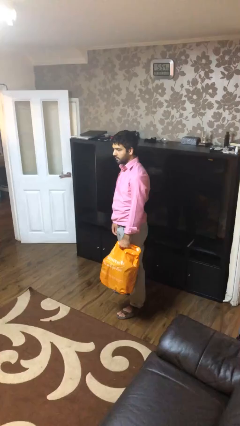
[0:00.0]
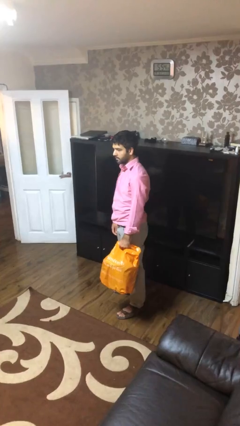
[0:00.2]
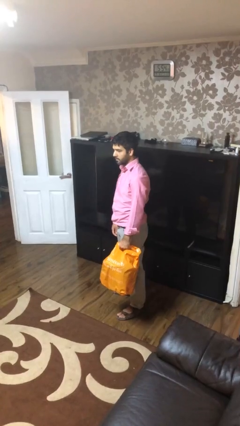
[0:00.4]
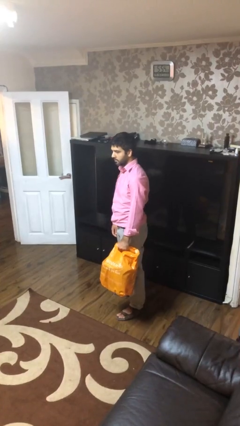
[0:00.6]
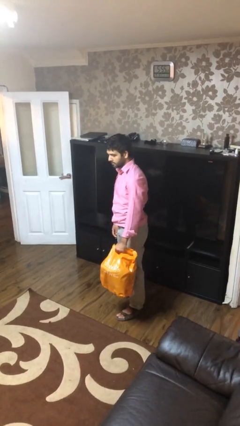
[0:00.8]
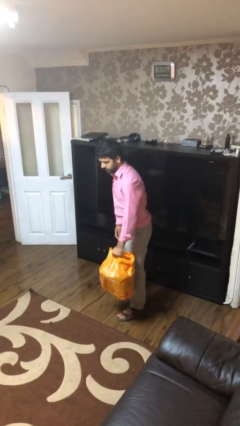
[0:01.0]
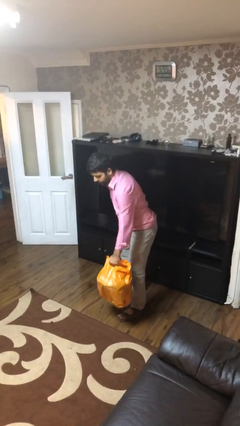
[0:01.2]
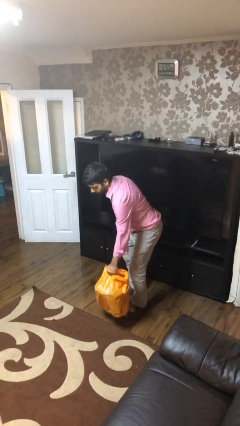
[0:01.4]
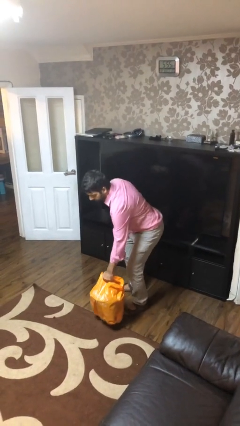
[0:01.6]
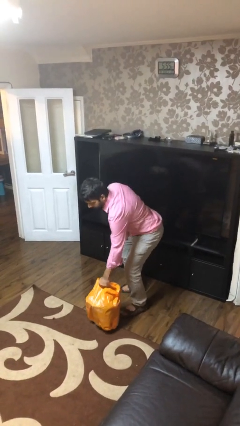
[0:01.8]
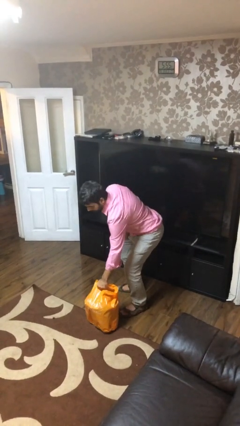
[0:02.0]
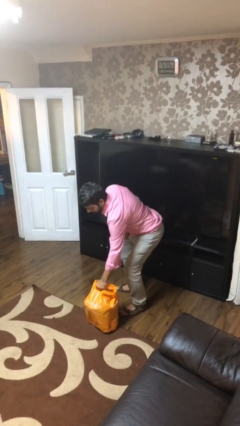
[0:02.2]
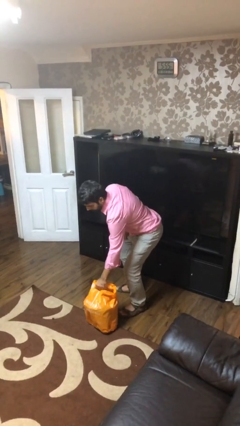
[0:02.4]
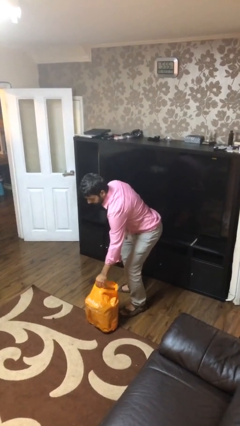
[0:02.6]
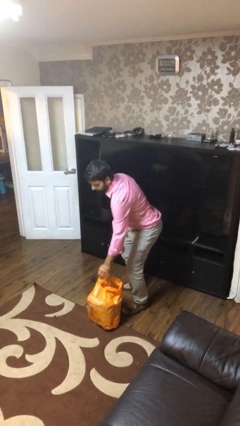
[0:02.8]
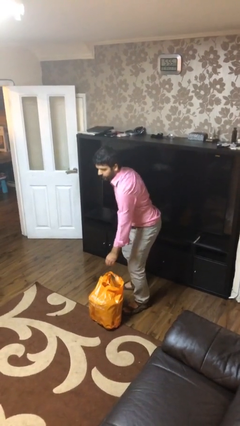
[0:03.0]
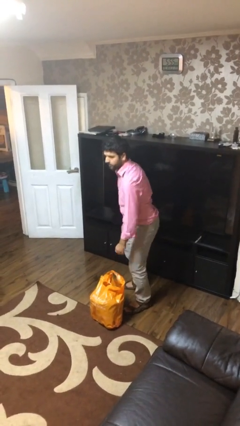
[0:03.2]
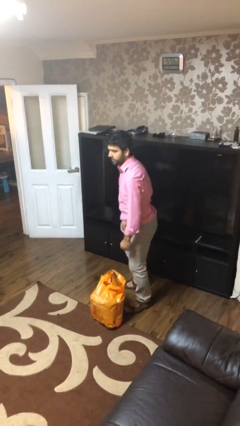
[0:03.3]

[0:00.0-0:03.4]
person puts down object on floor

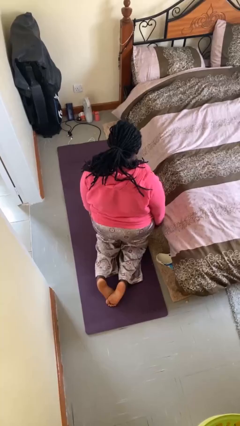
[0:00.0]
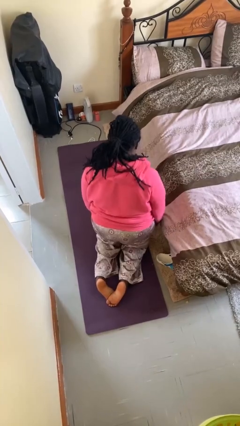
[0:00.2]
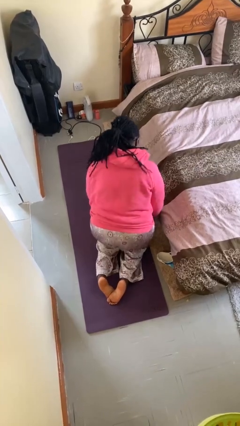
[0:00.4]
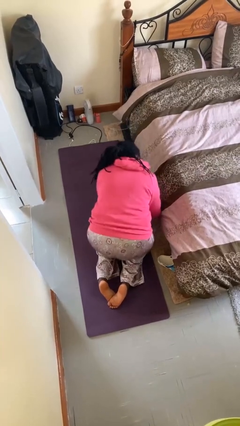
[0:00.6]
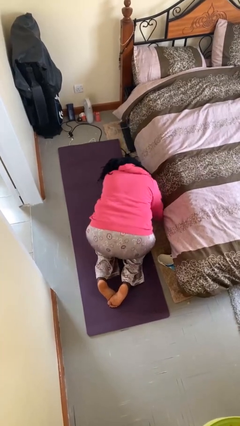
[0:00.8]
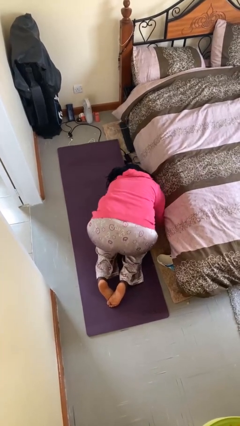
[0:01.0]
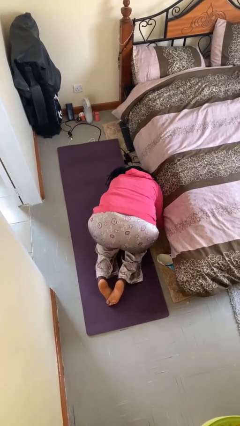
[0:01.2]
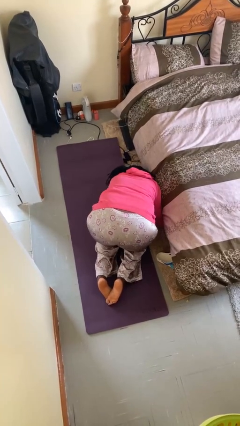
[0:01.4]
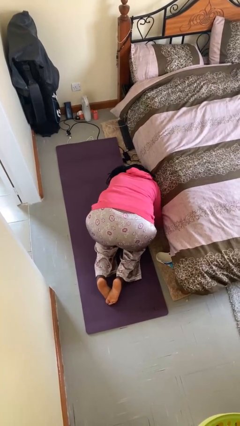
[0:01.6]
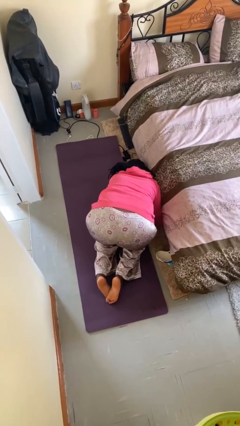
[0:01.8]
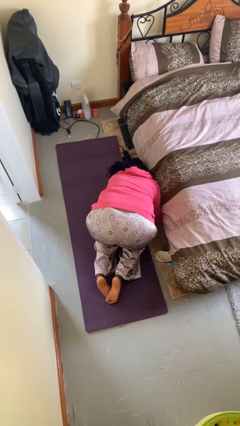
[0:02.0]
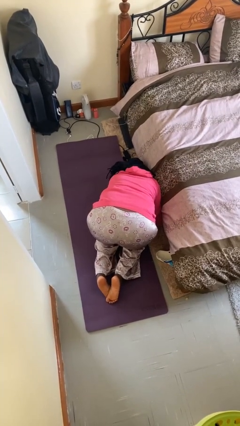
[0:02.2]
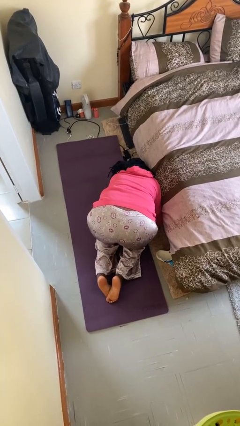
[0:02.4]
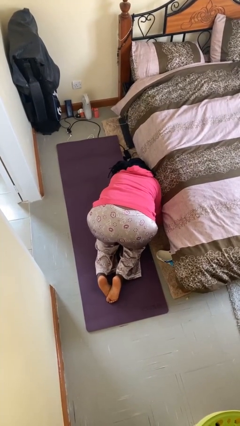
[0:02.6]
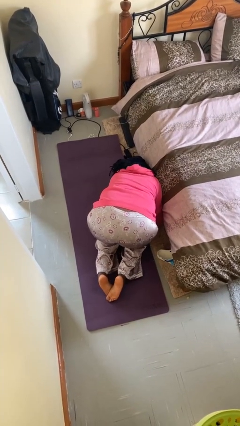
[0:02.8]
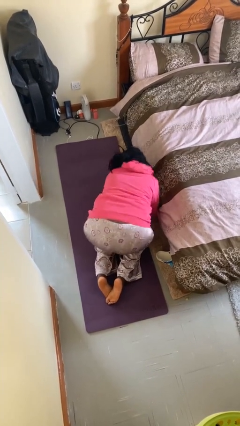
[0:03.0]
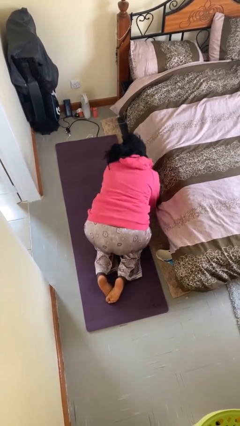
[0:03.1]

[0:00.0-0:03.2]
person searches under bed

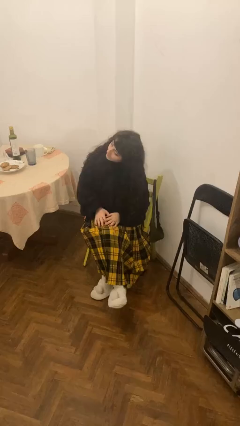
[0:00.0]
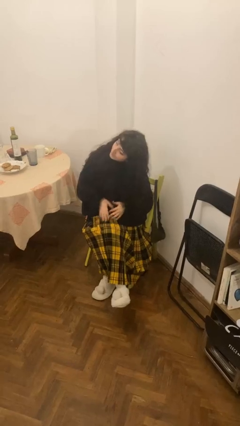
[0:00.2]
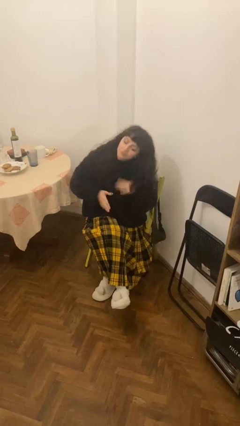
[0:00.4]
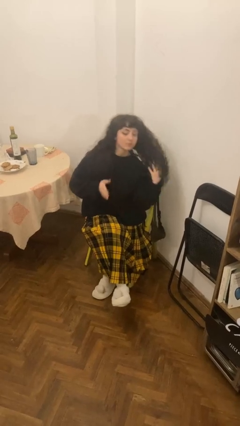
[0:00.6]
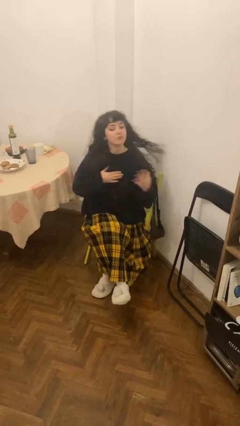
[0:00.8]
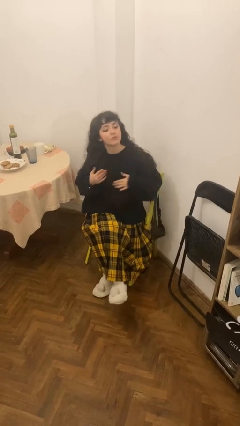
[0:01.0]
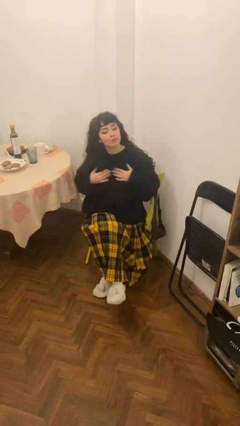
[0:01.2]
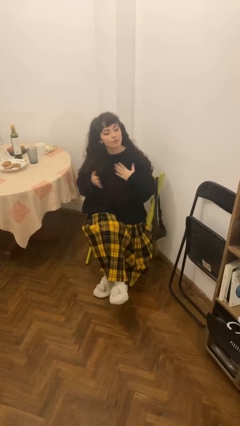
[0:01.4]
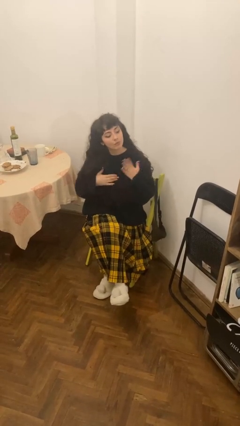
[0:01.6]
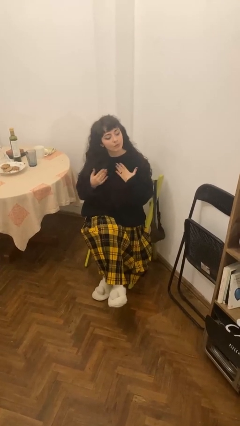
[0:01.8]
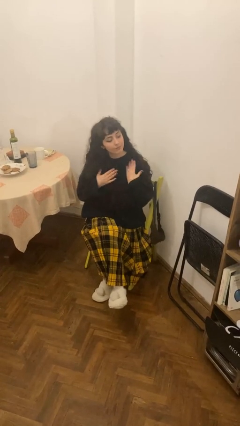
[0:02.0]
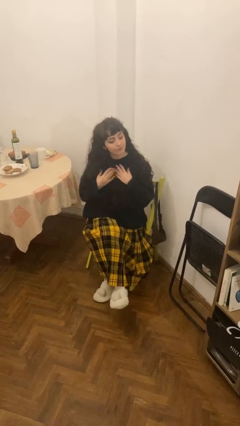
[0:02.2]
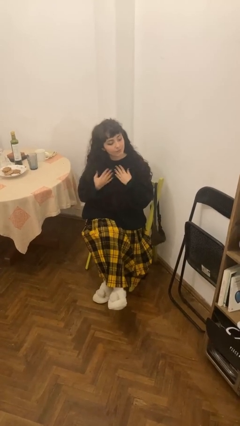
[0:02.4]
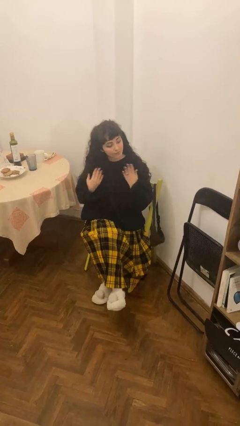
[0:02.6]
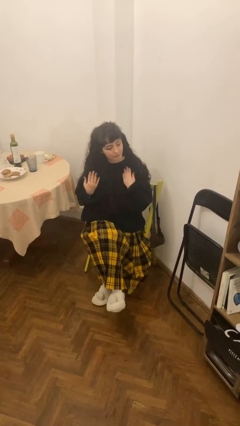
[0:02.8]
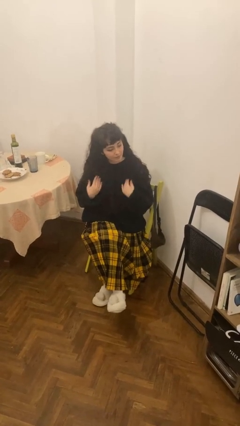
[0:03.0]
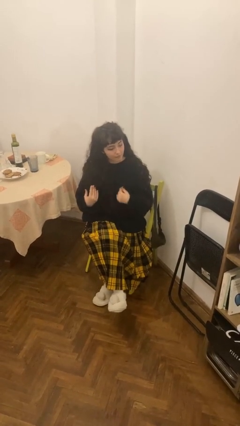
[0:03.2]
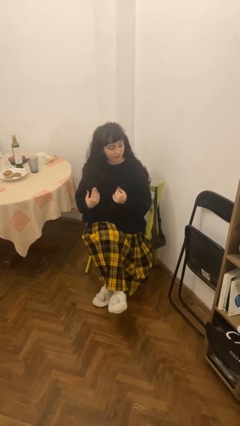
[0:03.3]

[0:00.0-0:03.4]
person drums on chest

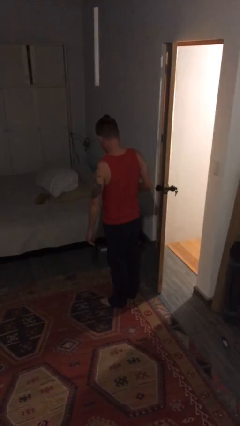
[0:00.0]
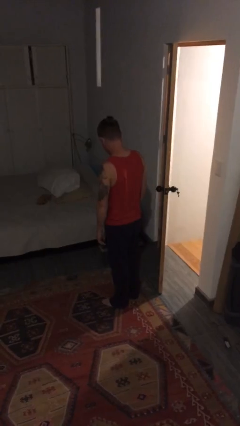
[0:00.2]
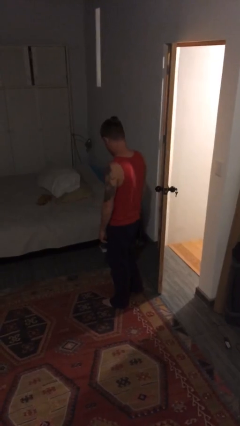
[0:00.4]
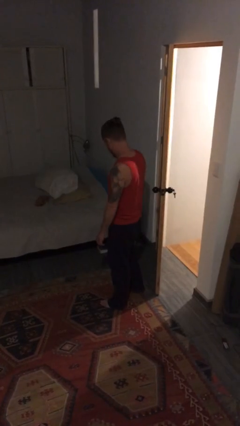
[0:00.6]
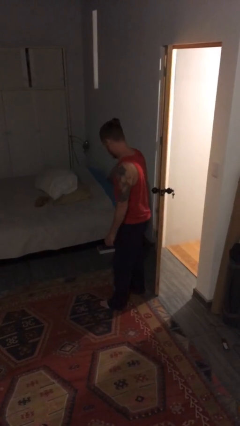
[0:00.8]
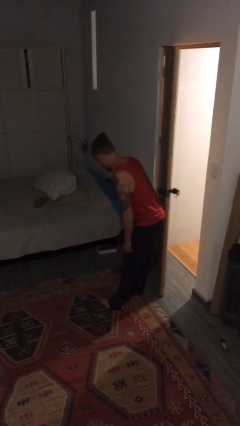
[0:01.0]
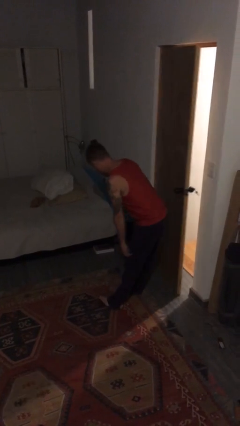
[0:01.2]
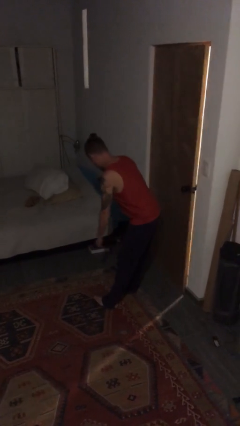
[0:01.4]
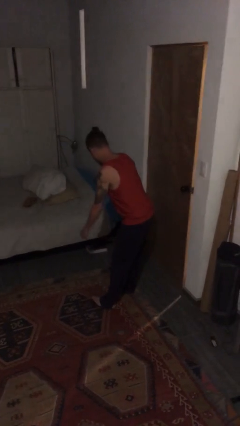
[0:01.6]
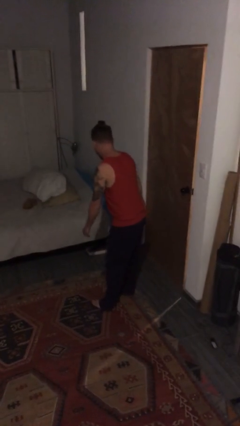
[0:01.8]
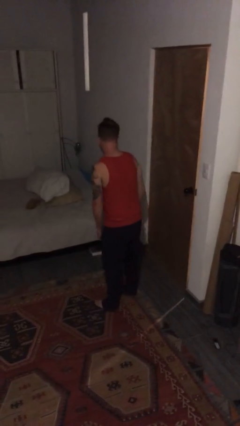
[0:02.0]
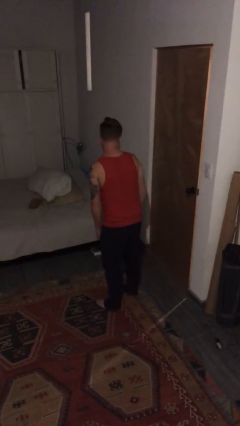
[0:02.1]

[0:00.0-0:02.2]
person closes door with hip

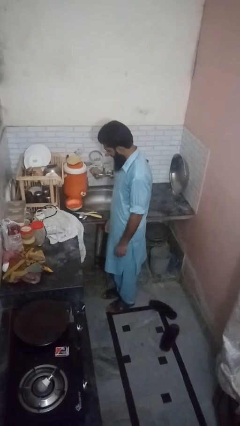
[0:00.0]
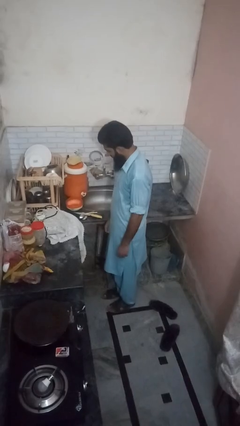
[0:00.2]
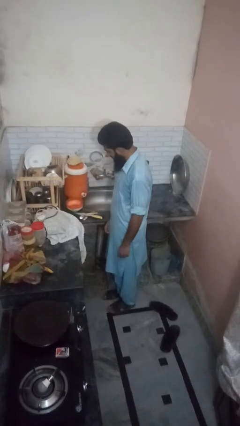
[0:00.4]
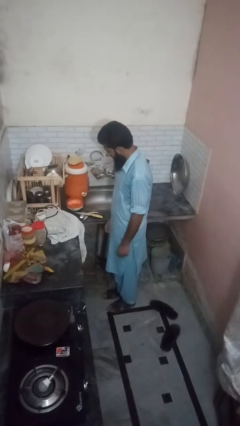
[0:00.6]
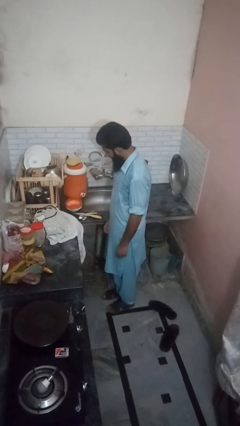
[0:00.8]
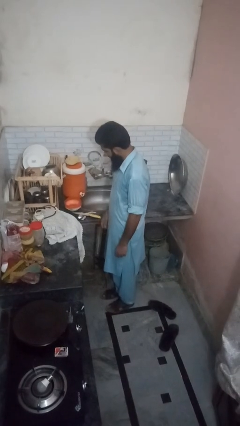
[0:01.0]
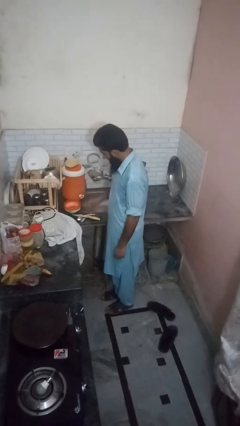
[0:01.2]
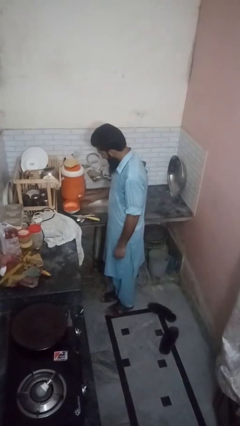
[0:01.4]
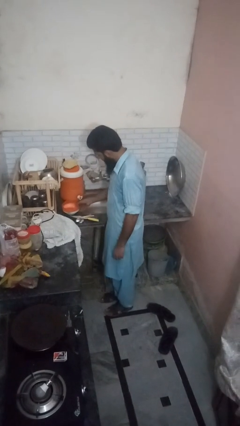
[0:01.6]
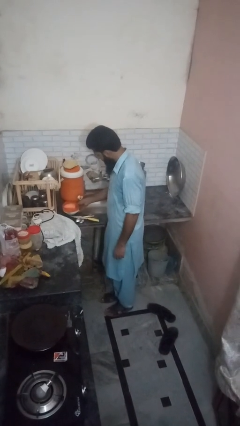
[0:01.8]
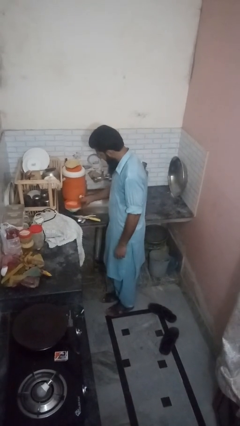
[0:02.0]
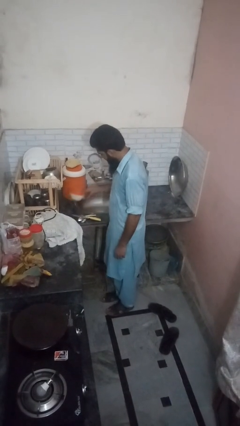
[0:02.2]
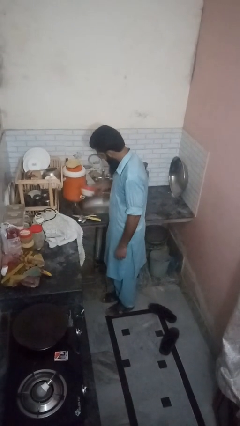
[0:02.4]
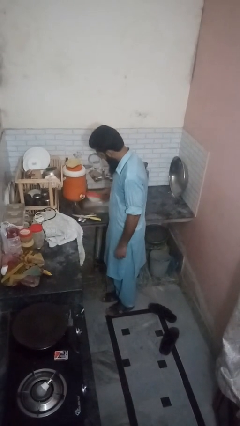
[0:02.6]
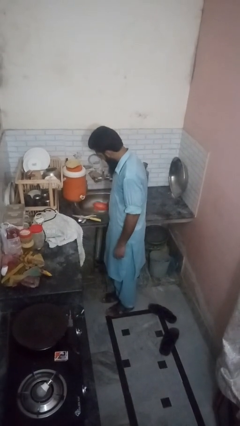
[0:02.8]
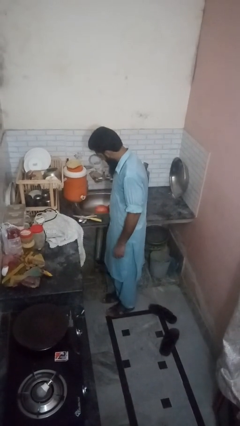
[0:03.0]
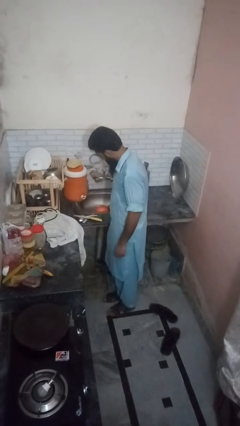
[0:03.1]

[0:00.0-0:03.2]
person loads dishwasher

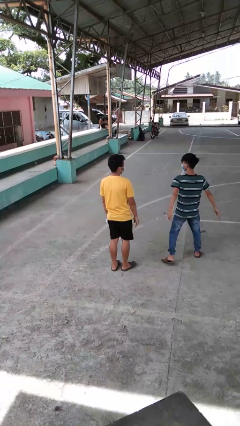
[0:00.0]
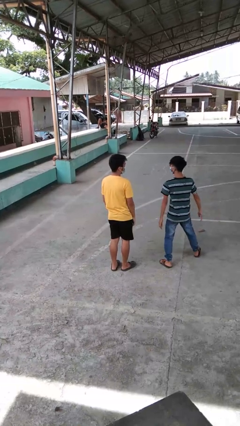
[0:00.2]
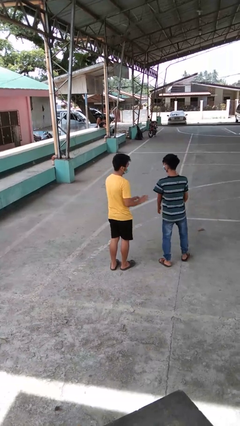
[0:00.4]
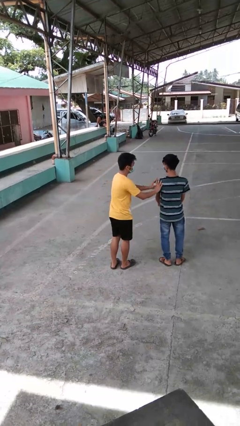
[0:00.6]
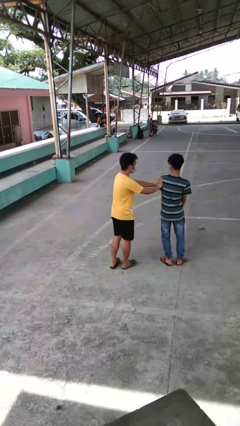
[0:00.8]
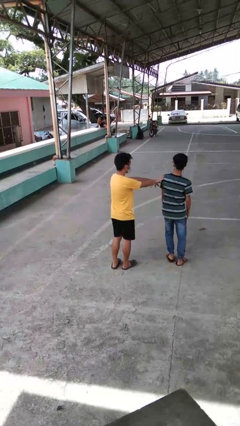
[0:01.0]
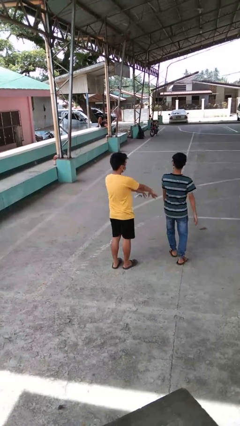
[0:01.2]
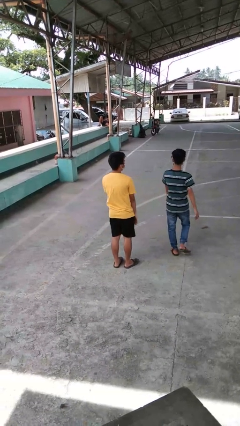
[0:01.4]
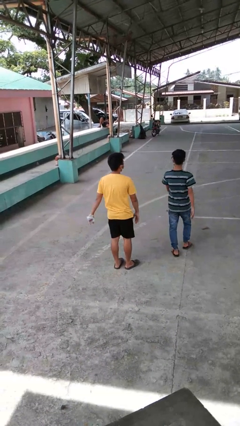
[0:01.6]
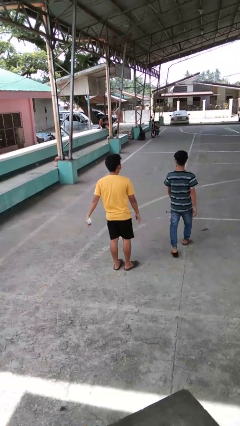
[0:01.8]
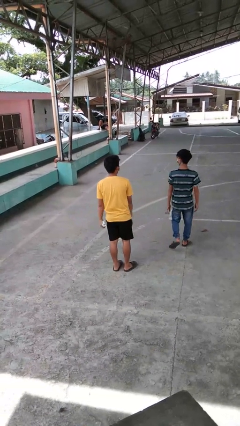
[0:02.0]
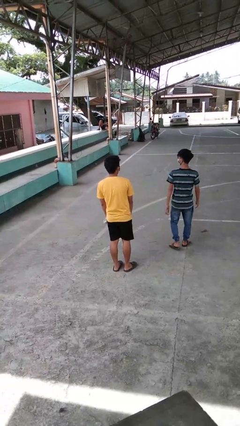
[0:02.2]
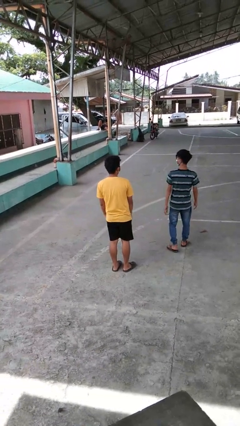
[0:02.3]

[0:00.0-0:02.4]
person shoves person
